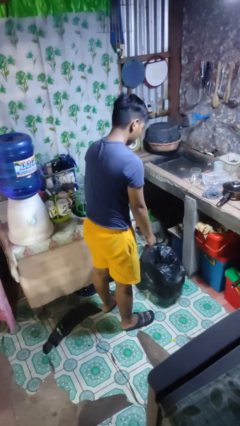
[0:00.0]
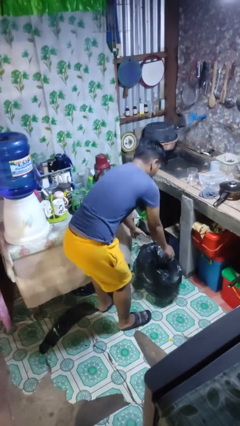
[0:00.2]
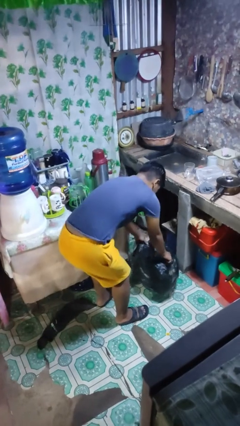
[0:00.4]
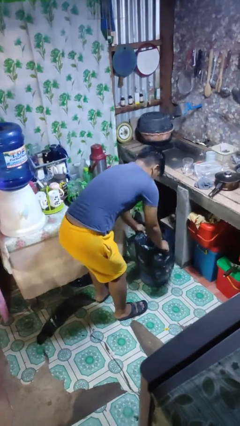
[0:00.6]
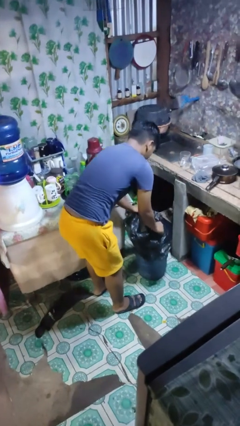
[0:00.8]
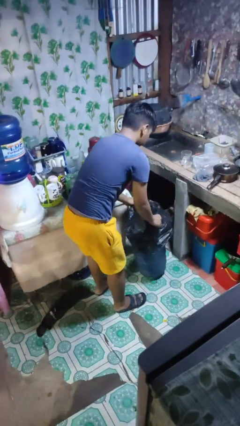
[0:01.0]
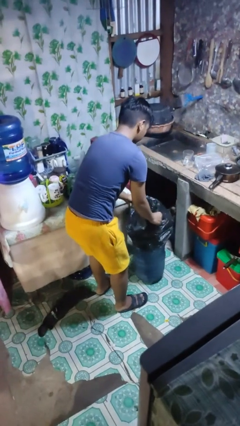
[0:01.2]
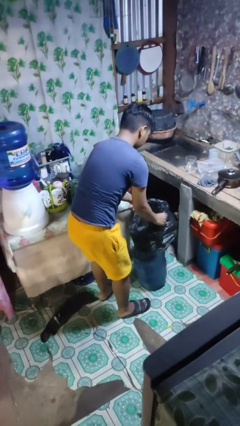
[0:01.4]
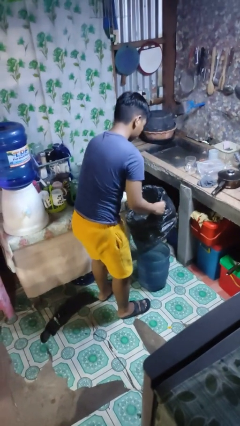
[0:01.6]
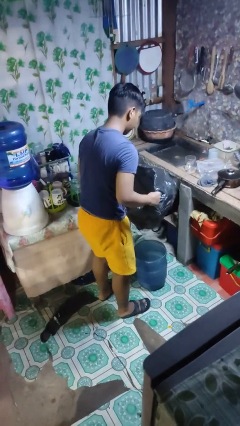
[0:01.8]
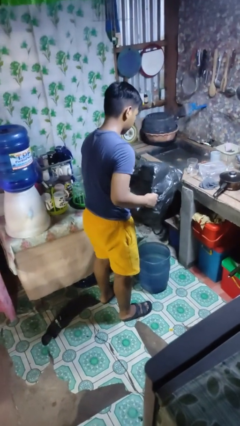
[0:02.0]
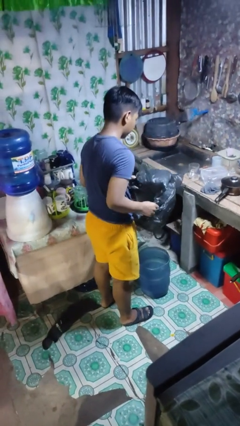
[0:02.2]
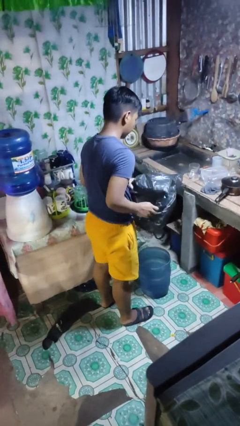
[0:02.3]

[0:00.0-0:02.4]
person removes trashbag from trashcan

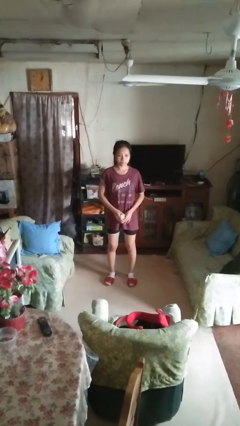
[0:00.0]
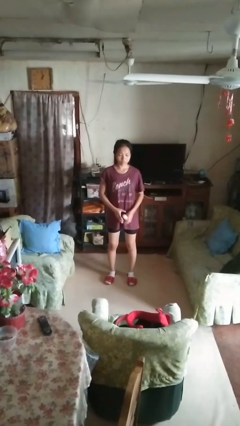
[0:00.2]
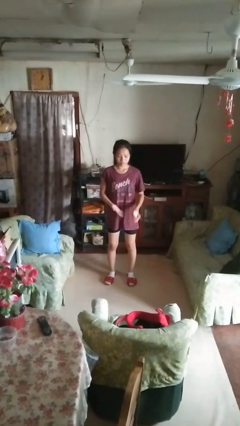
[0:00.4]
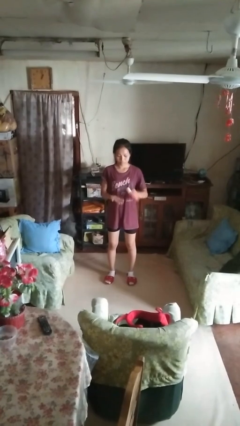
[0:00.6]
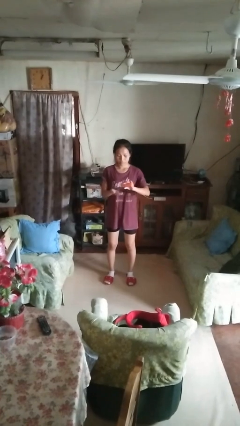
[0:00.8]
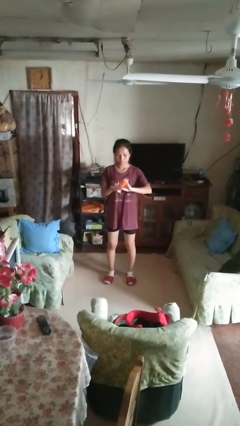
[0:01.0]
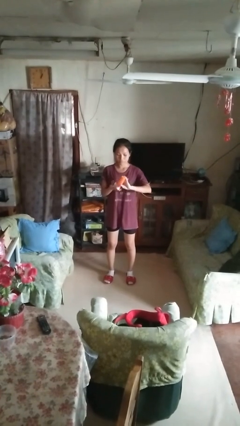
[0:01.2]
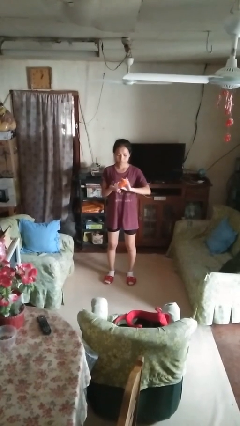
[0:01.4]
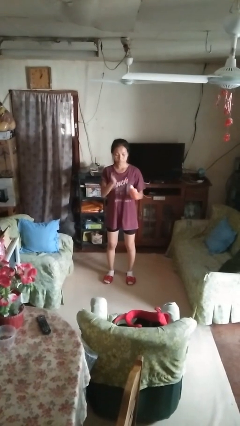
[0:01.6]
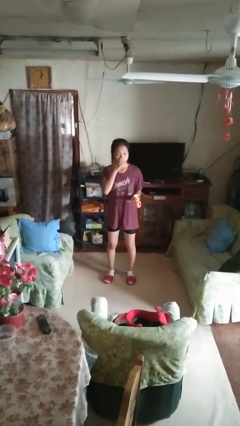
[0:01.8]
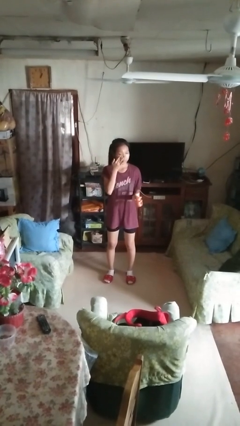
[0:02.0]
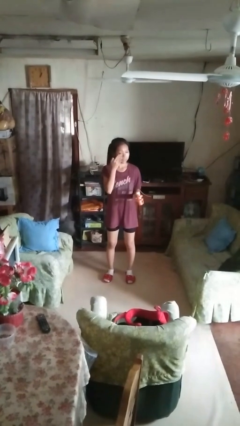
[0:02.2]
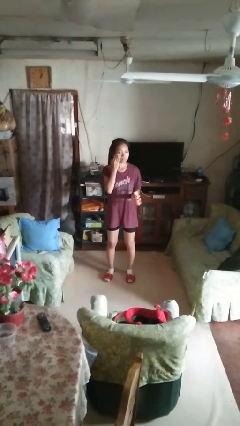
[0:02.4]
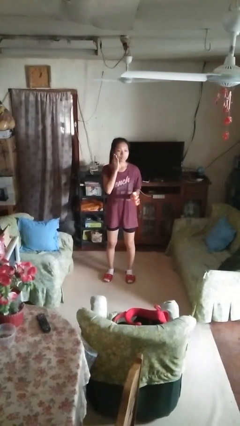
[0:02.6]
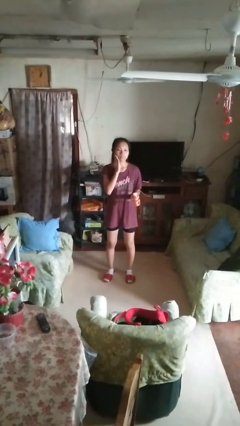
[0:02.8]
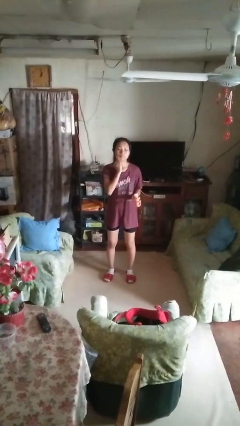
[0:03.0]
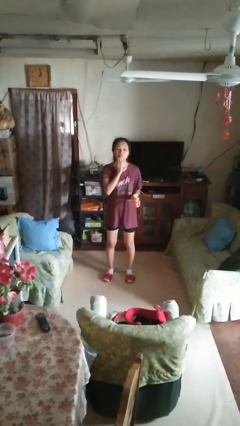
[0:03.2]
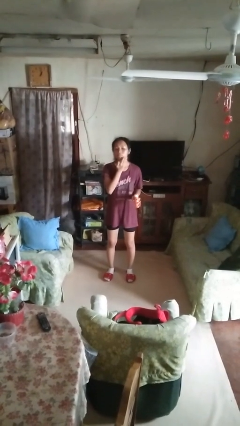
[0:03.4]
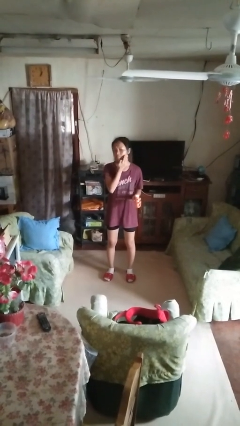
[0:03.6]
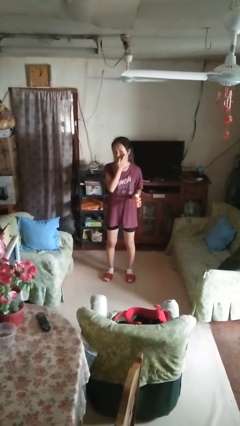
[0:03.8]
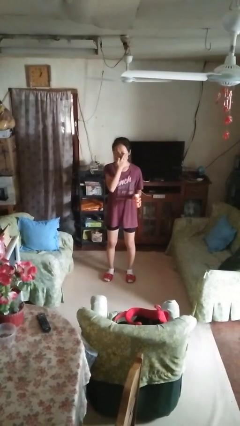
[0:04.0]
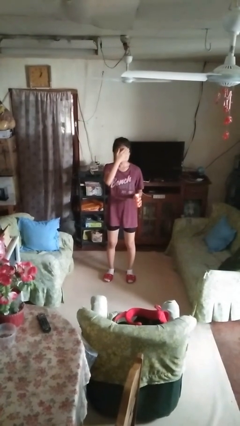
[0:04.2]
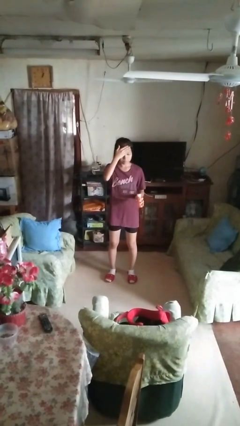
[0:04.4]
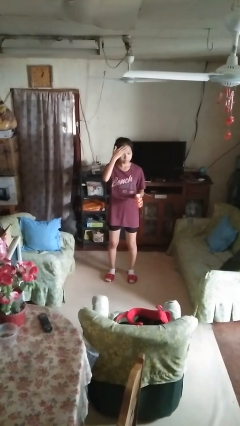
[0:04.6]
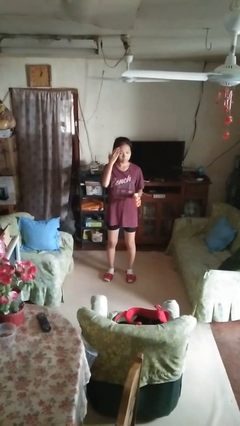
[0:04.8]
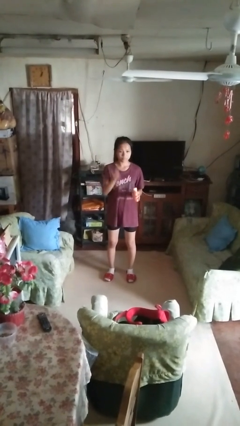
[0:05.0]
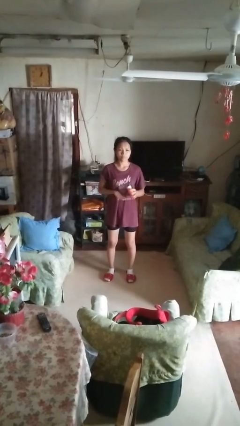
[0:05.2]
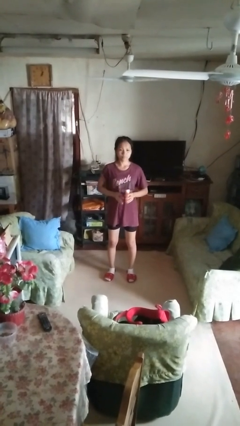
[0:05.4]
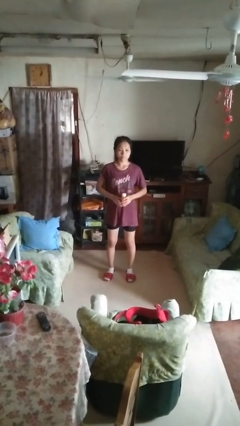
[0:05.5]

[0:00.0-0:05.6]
person applies facial moisturizer

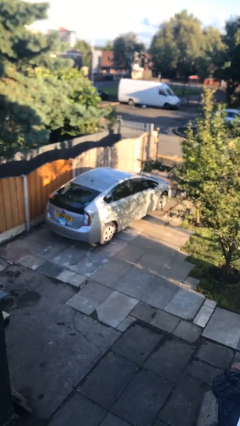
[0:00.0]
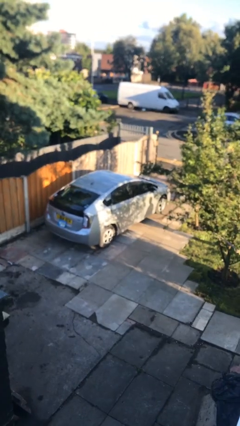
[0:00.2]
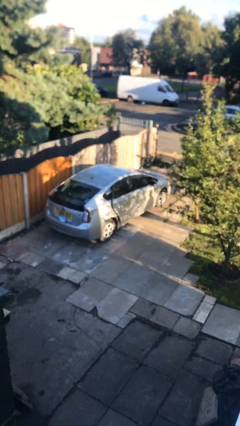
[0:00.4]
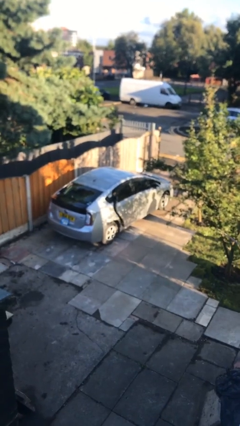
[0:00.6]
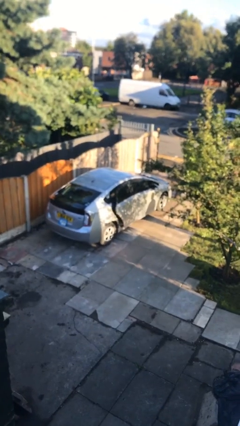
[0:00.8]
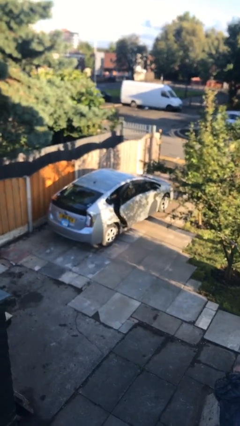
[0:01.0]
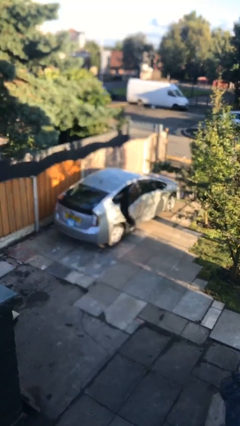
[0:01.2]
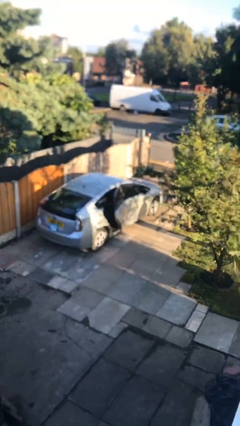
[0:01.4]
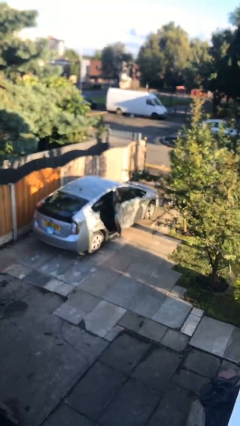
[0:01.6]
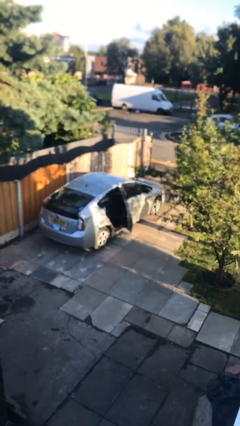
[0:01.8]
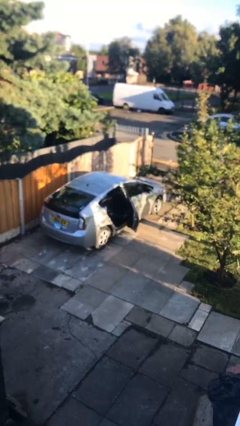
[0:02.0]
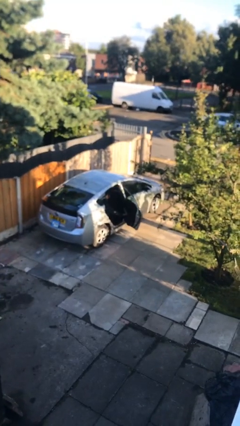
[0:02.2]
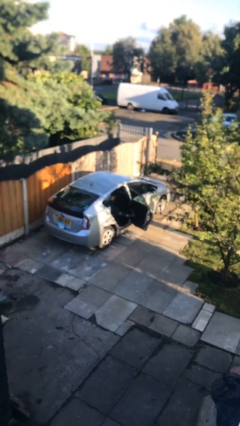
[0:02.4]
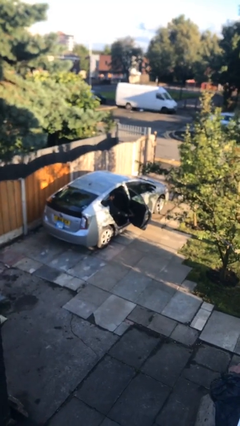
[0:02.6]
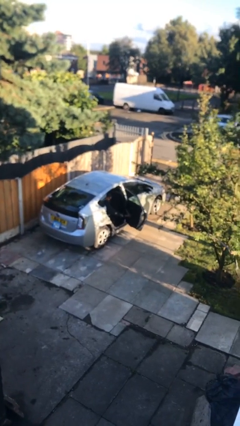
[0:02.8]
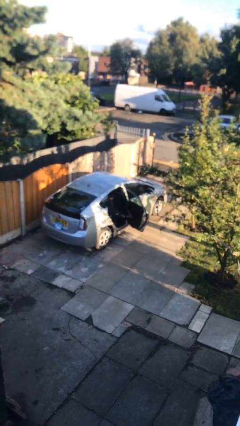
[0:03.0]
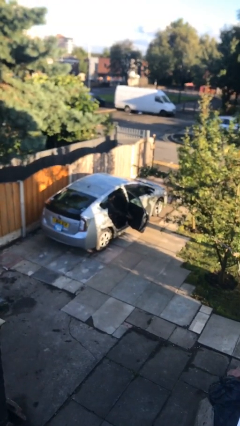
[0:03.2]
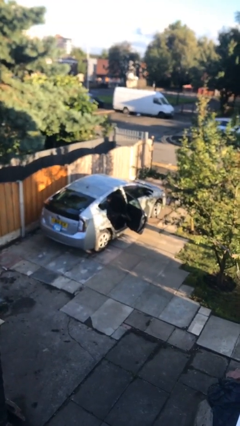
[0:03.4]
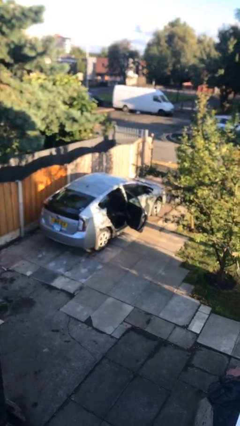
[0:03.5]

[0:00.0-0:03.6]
person opens car door

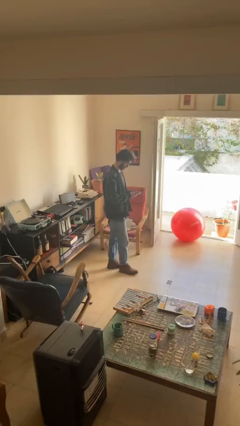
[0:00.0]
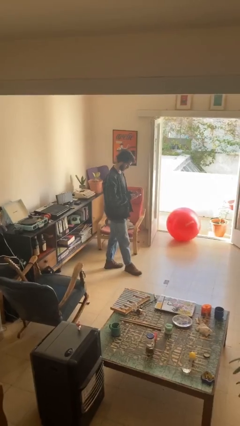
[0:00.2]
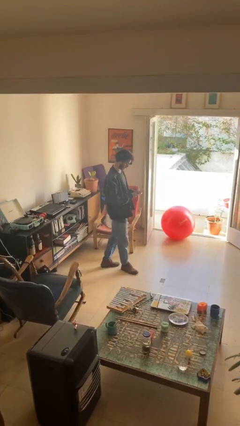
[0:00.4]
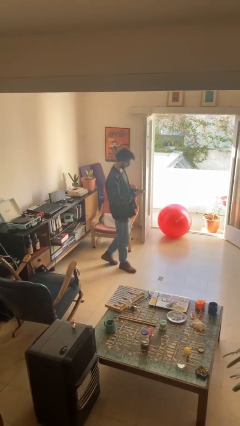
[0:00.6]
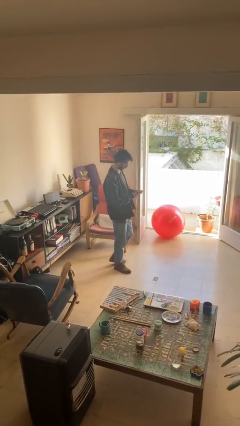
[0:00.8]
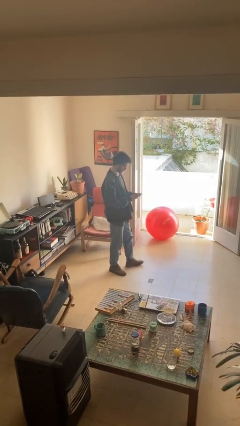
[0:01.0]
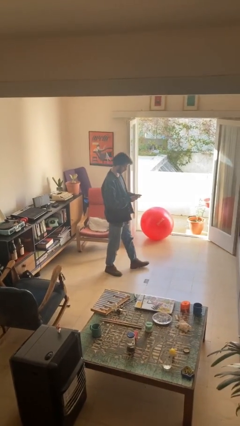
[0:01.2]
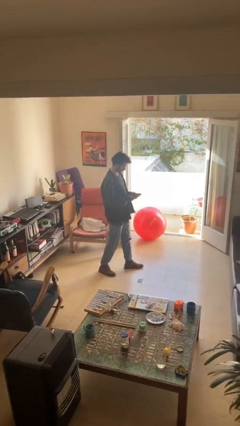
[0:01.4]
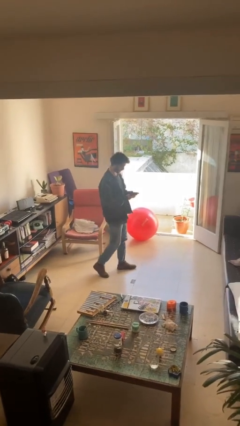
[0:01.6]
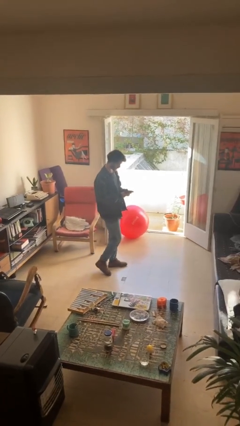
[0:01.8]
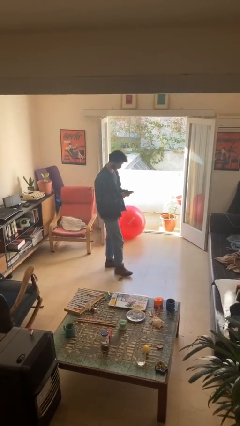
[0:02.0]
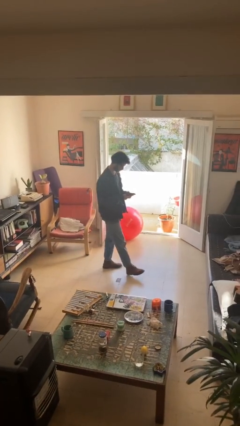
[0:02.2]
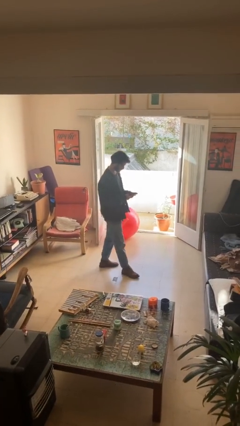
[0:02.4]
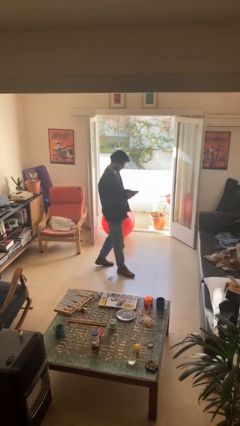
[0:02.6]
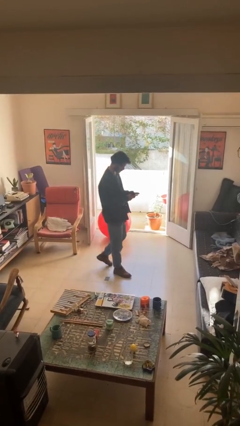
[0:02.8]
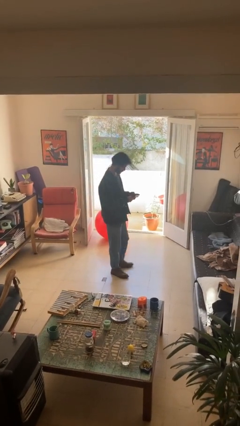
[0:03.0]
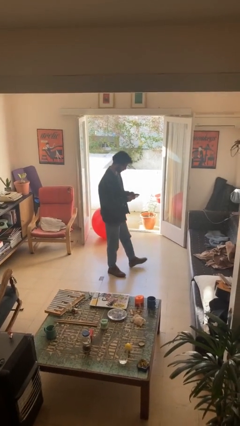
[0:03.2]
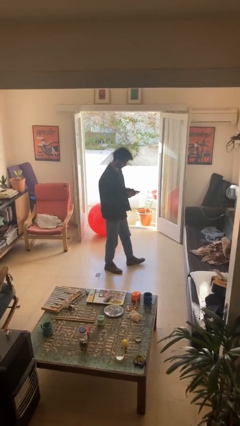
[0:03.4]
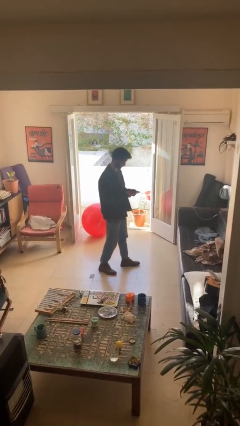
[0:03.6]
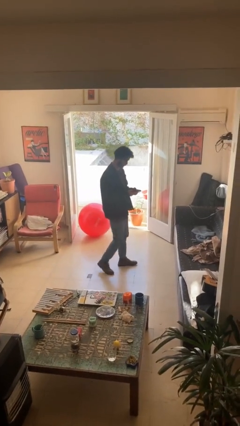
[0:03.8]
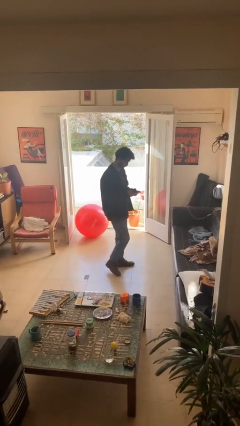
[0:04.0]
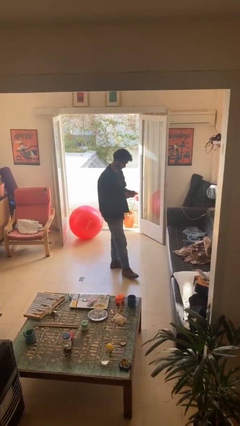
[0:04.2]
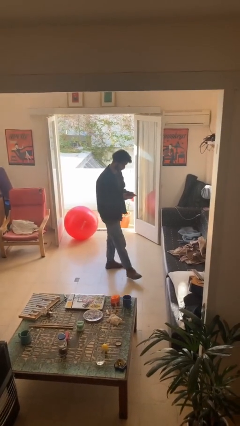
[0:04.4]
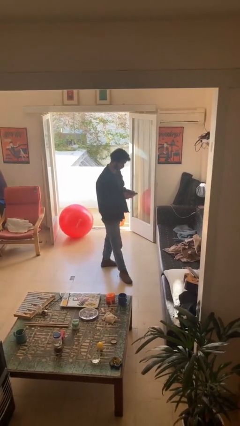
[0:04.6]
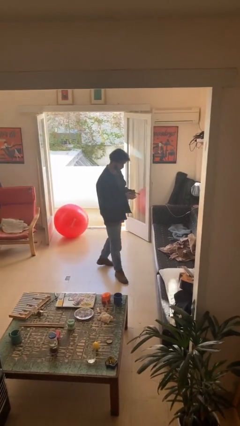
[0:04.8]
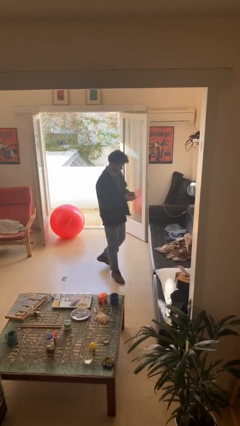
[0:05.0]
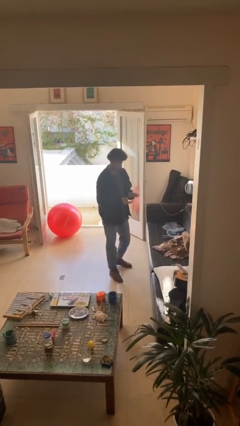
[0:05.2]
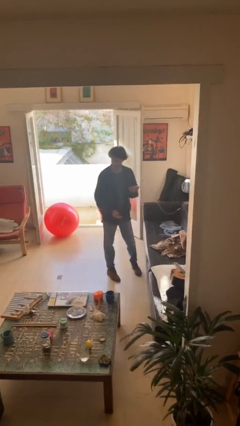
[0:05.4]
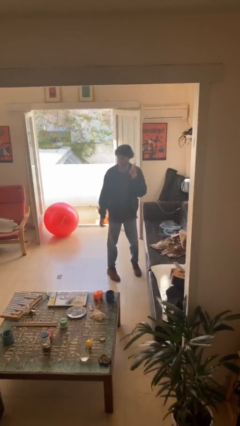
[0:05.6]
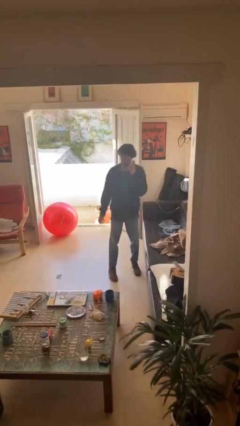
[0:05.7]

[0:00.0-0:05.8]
person texts on phone

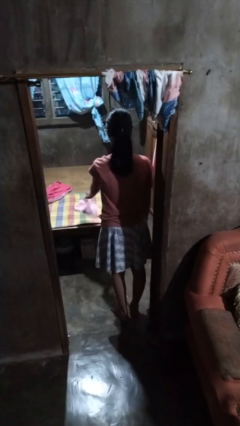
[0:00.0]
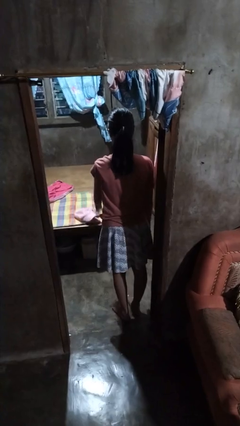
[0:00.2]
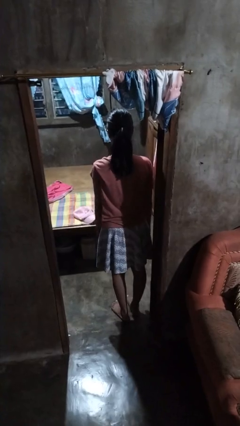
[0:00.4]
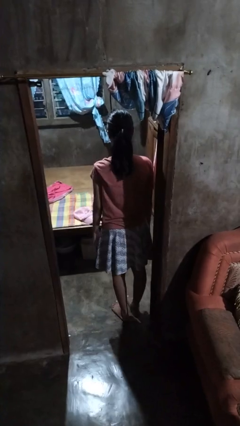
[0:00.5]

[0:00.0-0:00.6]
person throws object on bed
